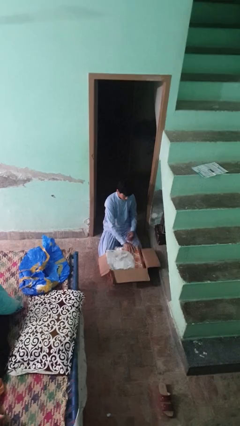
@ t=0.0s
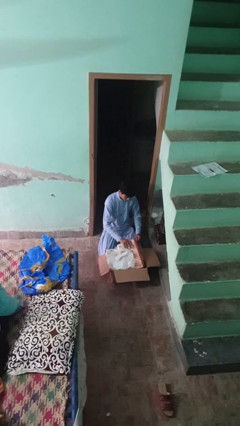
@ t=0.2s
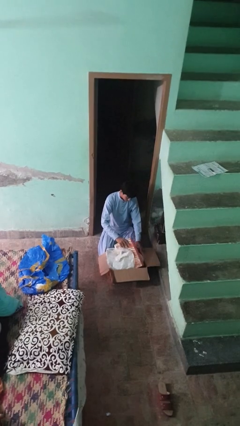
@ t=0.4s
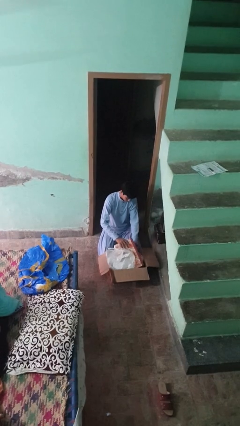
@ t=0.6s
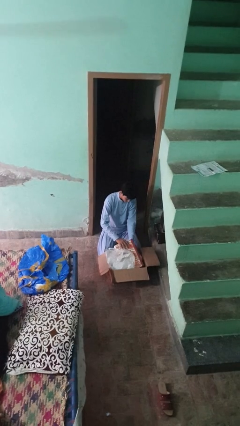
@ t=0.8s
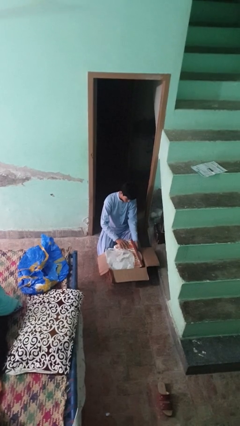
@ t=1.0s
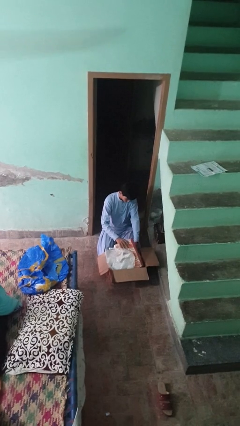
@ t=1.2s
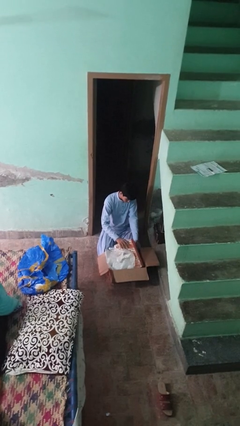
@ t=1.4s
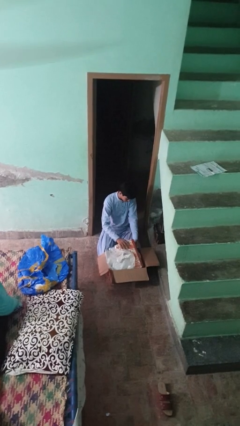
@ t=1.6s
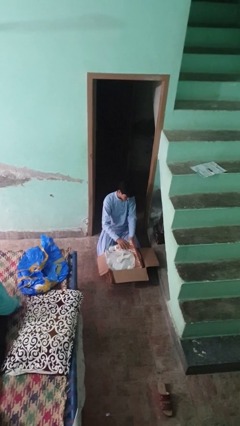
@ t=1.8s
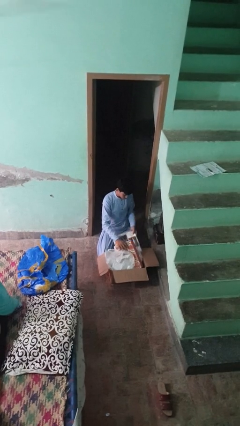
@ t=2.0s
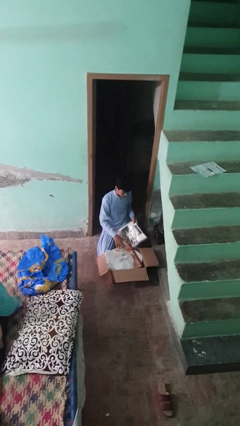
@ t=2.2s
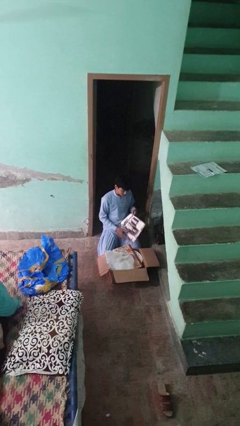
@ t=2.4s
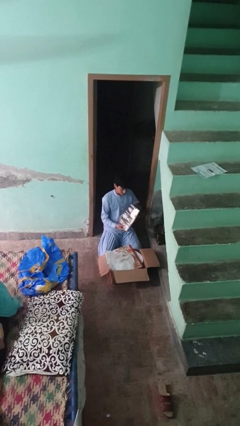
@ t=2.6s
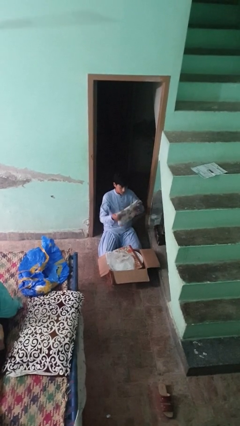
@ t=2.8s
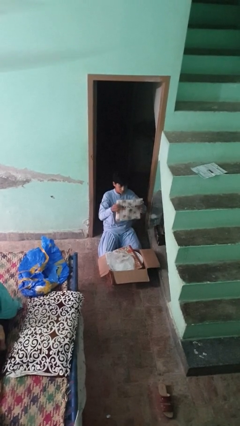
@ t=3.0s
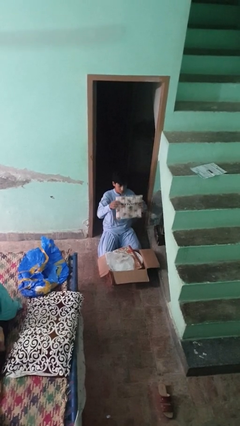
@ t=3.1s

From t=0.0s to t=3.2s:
person takes object from box

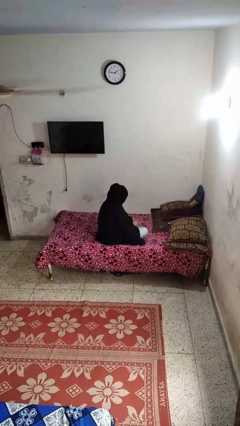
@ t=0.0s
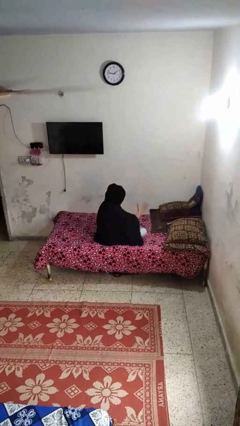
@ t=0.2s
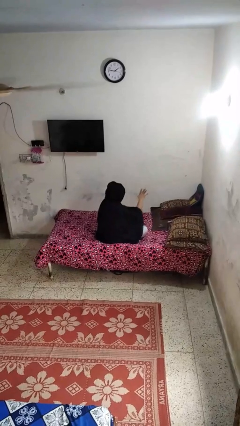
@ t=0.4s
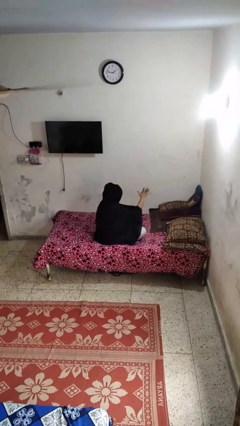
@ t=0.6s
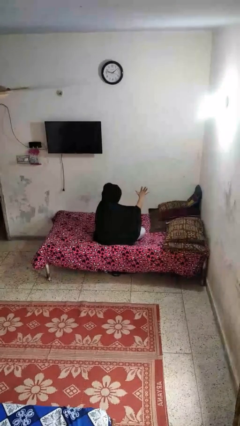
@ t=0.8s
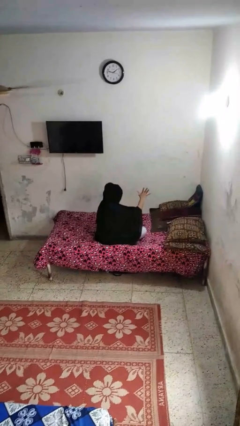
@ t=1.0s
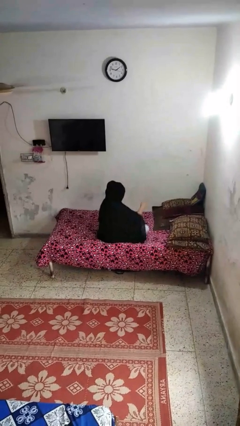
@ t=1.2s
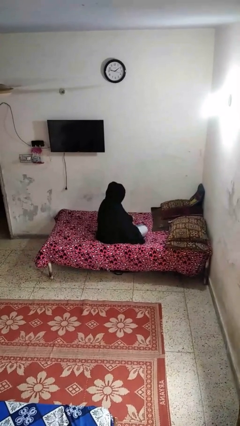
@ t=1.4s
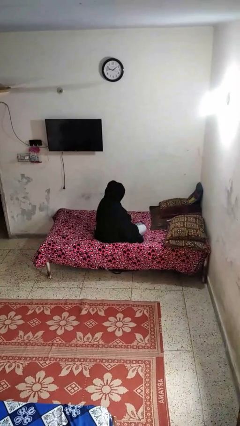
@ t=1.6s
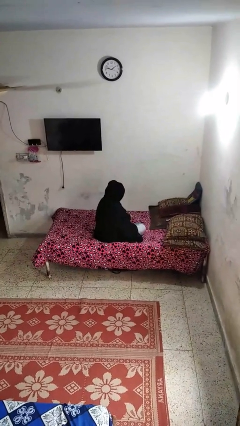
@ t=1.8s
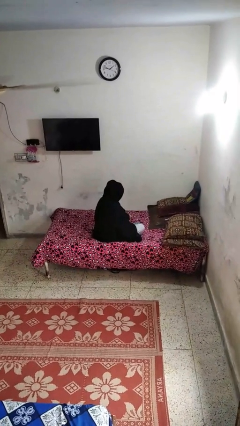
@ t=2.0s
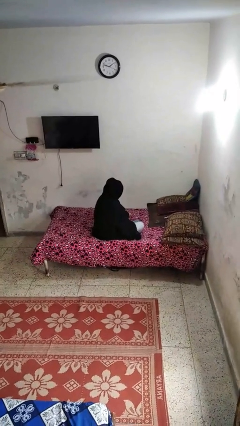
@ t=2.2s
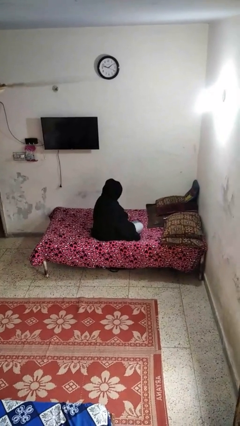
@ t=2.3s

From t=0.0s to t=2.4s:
person gestures number five

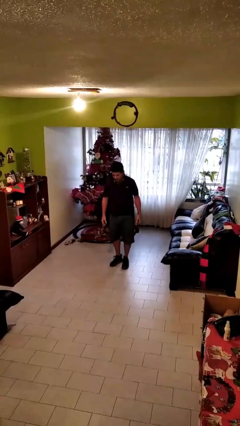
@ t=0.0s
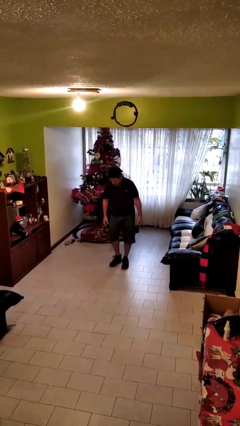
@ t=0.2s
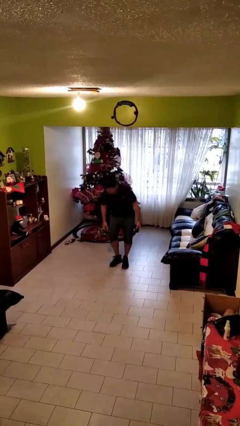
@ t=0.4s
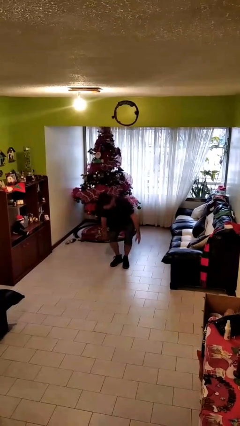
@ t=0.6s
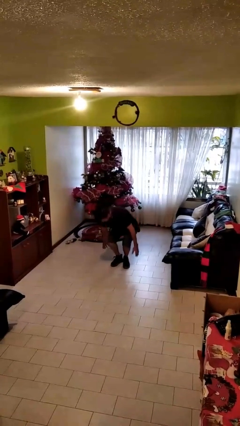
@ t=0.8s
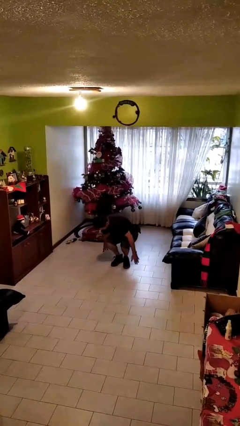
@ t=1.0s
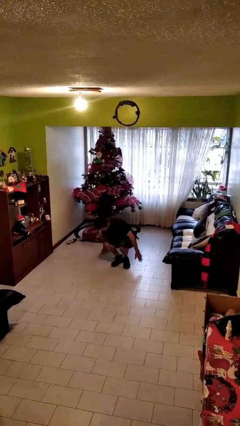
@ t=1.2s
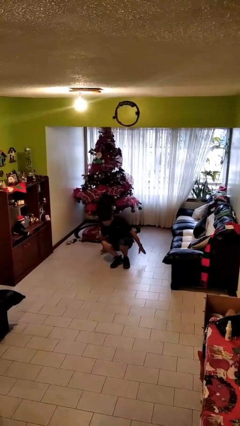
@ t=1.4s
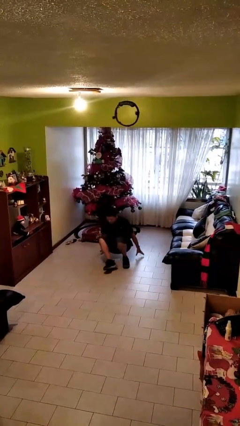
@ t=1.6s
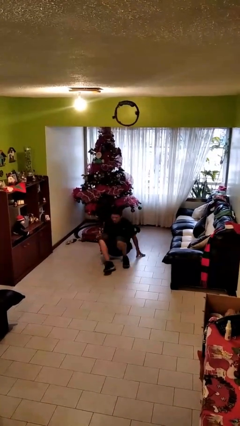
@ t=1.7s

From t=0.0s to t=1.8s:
person sits down

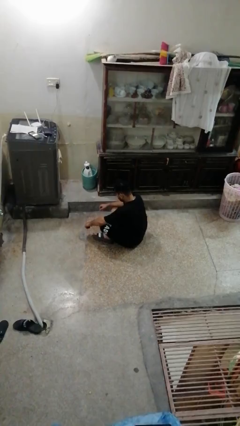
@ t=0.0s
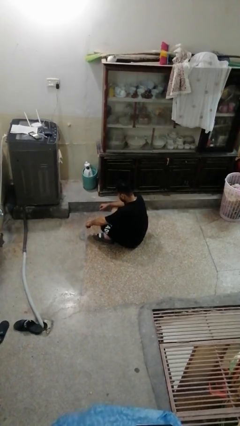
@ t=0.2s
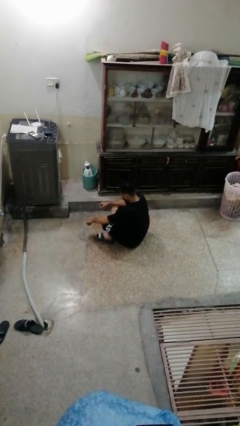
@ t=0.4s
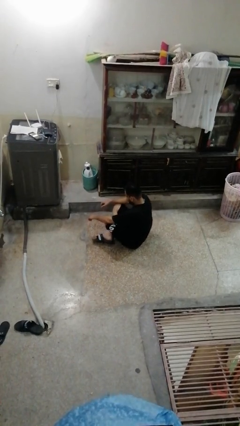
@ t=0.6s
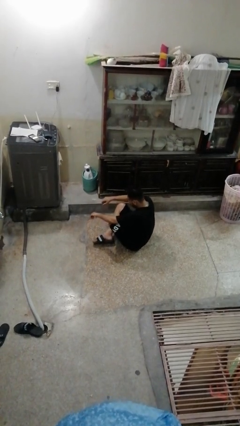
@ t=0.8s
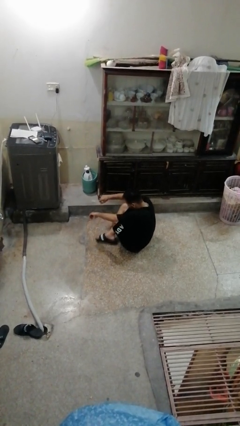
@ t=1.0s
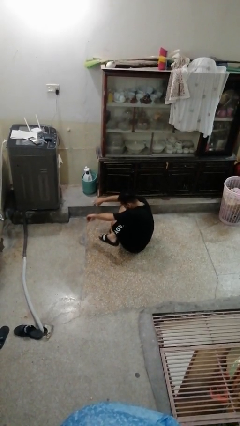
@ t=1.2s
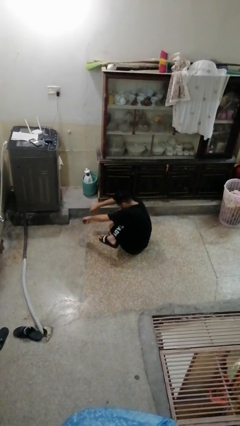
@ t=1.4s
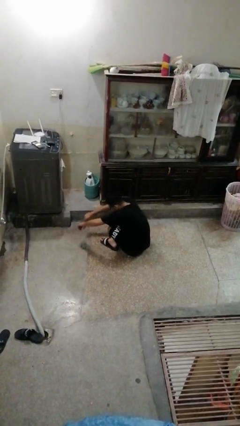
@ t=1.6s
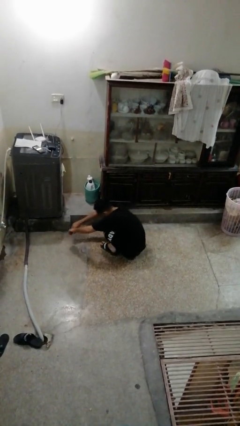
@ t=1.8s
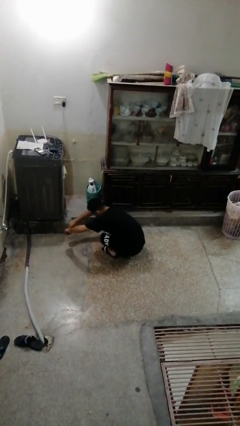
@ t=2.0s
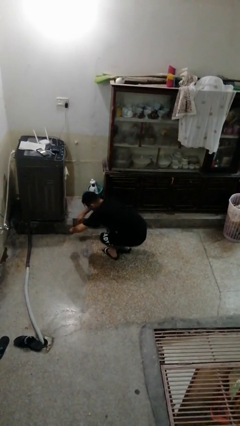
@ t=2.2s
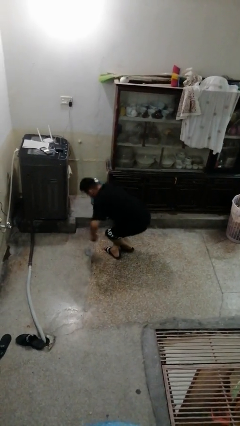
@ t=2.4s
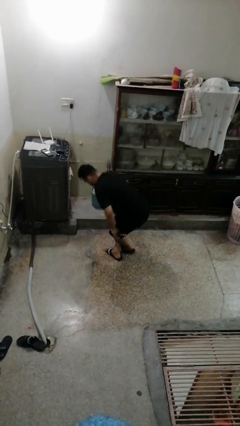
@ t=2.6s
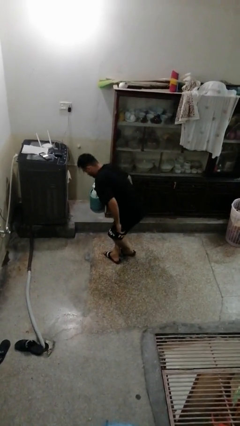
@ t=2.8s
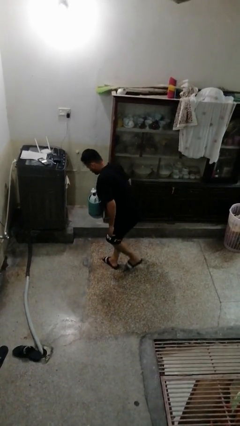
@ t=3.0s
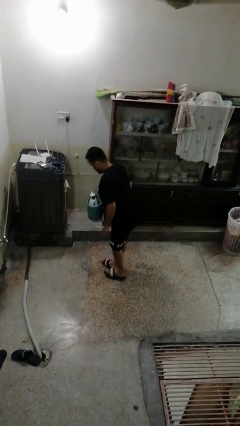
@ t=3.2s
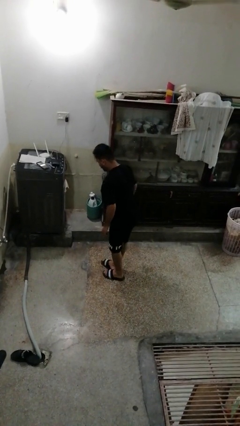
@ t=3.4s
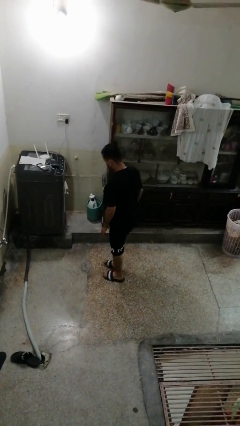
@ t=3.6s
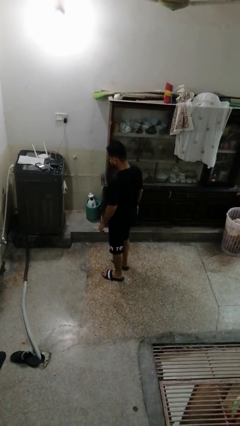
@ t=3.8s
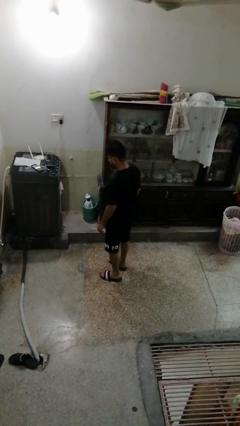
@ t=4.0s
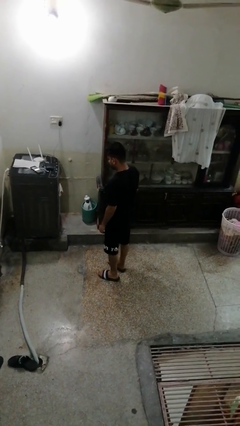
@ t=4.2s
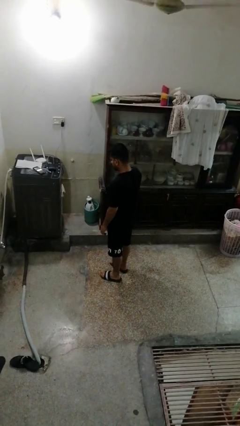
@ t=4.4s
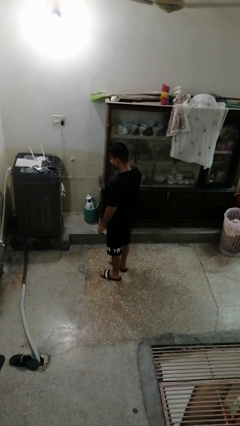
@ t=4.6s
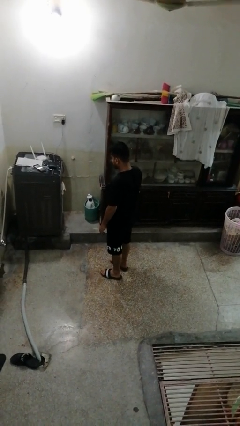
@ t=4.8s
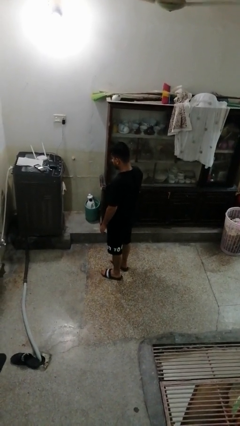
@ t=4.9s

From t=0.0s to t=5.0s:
person stands up from floor

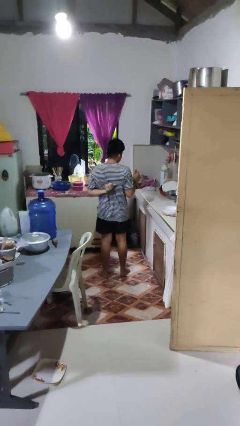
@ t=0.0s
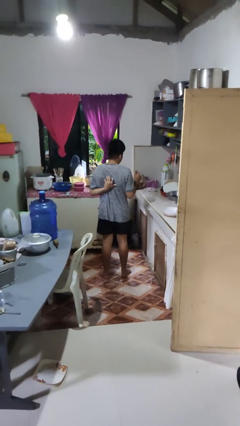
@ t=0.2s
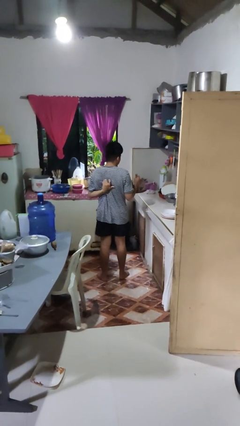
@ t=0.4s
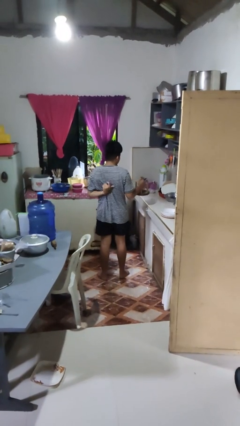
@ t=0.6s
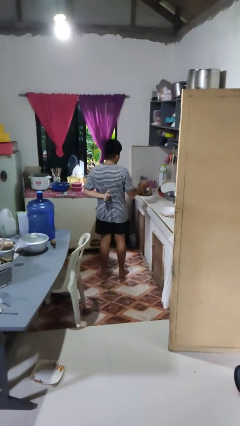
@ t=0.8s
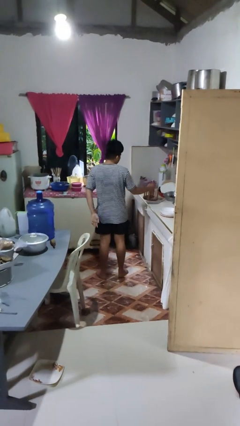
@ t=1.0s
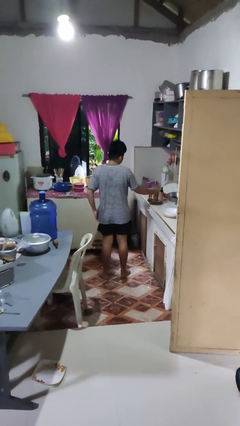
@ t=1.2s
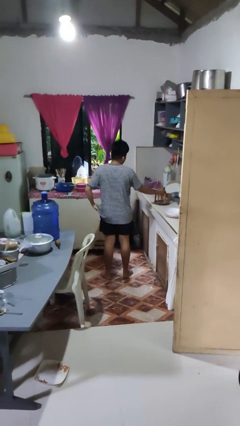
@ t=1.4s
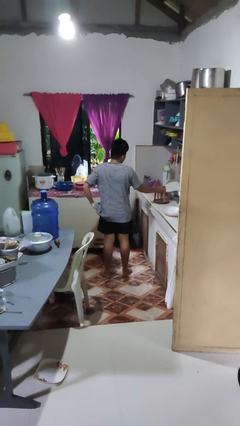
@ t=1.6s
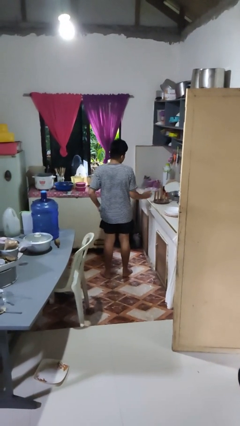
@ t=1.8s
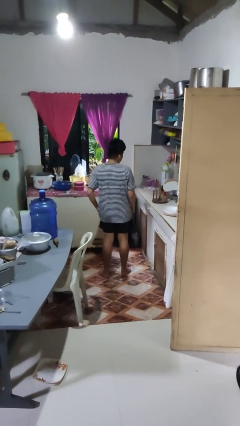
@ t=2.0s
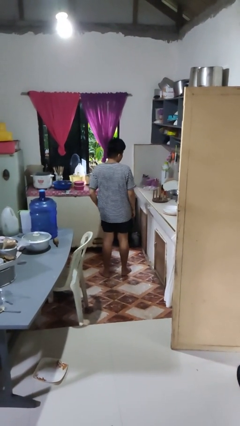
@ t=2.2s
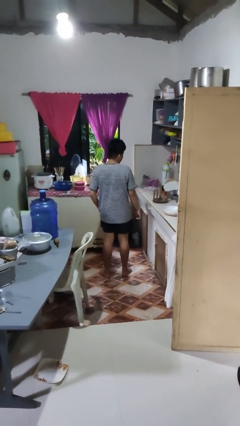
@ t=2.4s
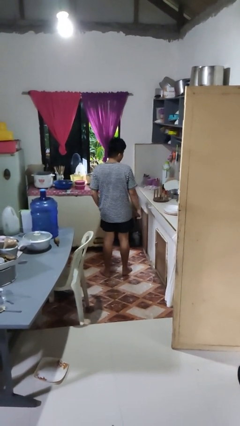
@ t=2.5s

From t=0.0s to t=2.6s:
person puts down object on countertop

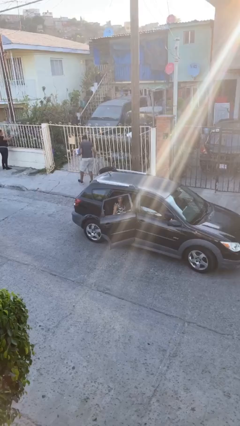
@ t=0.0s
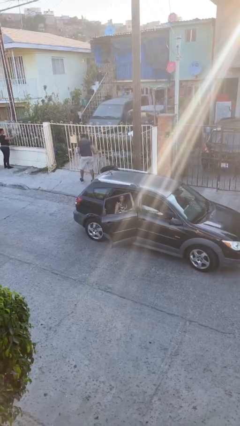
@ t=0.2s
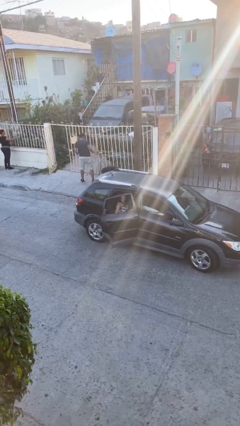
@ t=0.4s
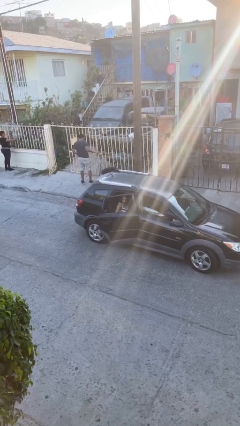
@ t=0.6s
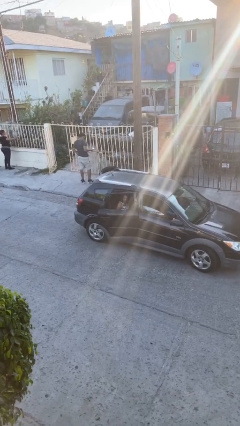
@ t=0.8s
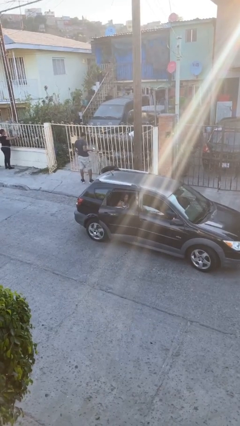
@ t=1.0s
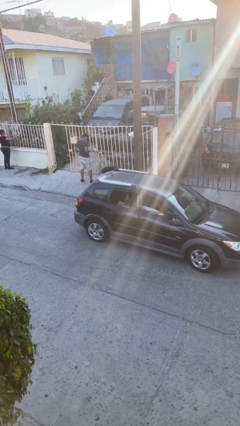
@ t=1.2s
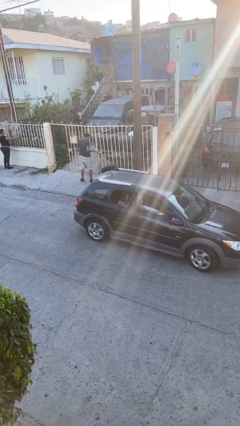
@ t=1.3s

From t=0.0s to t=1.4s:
person closes car door

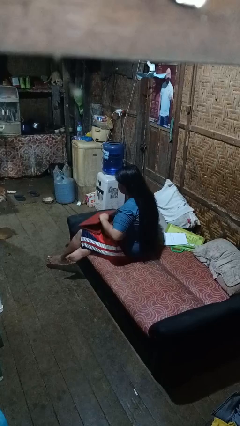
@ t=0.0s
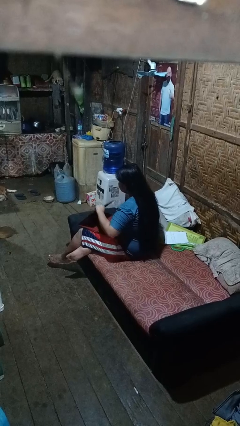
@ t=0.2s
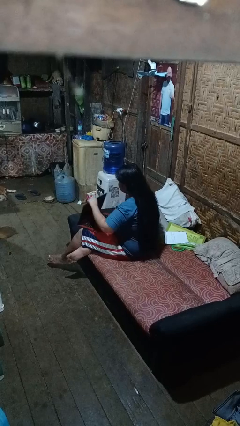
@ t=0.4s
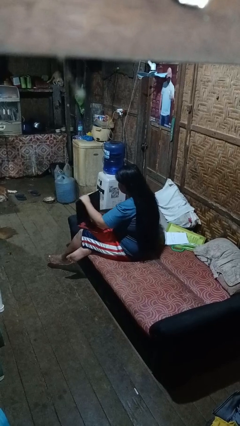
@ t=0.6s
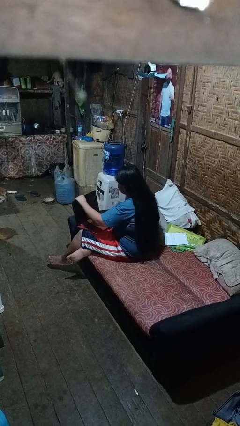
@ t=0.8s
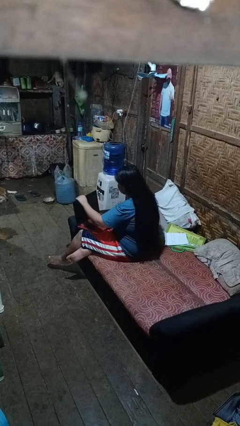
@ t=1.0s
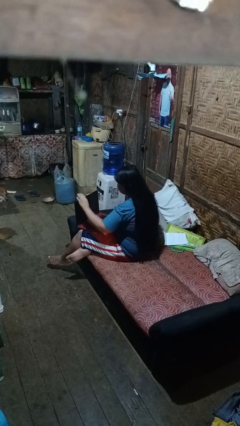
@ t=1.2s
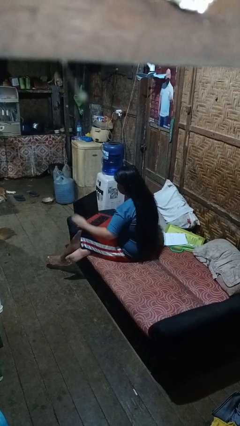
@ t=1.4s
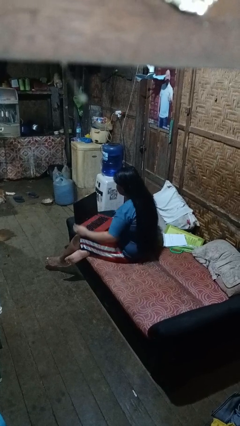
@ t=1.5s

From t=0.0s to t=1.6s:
person opens laptop
